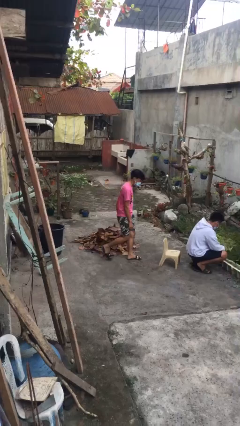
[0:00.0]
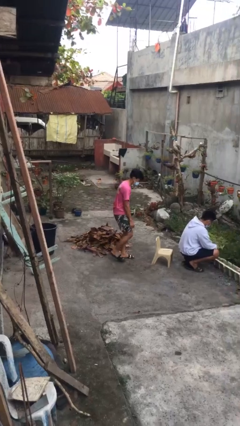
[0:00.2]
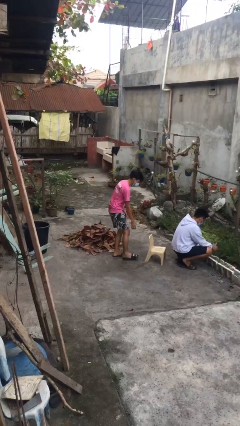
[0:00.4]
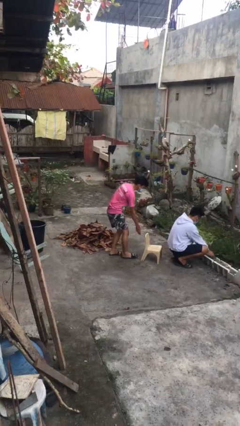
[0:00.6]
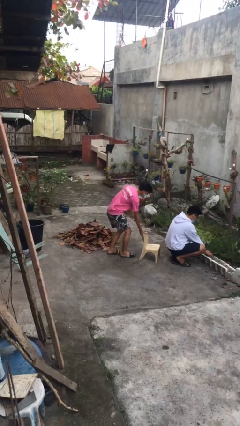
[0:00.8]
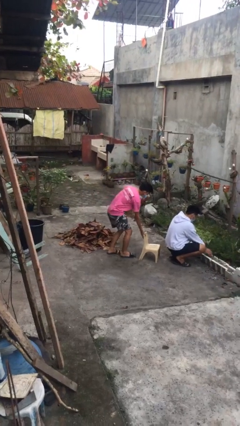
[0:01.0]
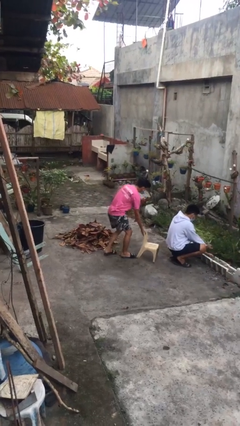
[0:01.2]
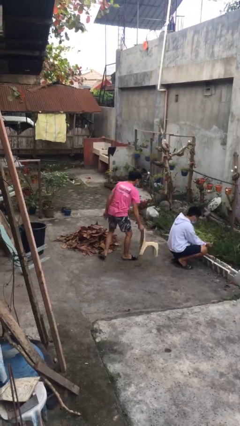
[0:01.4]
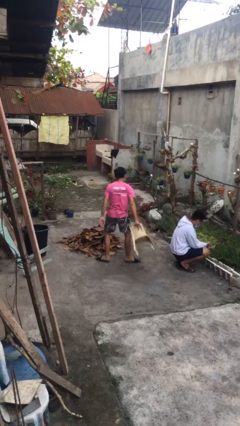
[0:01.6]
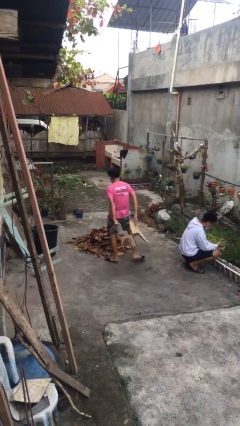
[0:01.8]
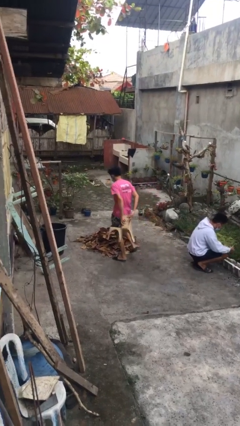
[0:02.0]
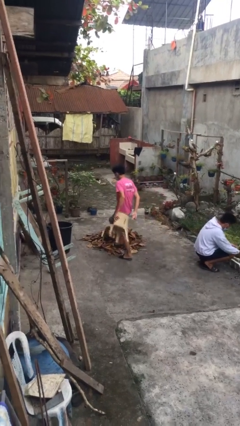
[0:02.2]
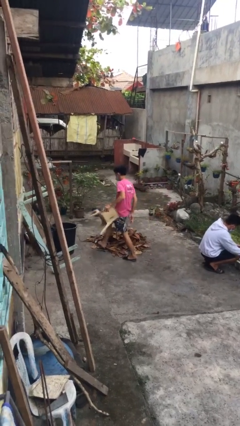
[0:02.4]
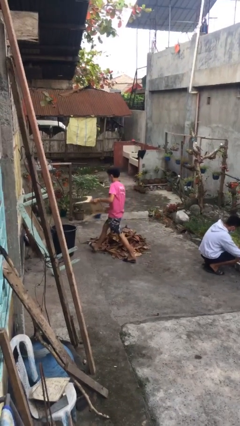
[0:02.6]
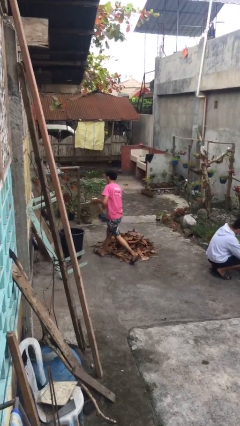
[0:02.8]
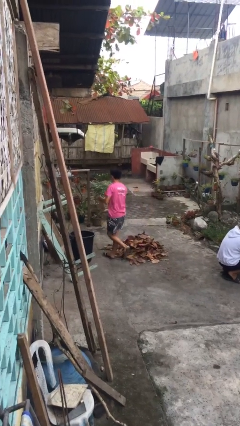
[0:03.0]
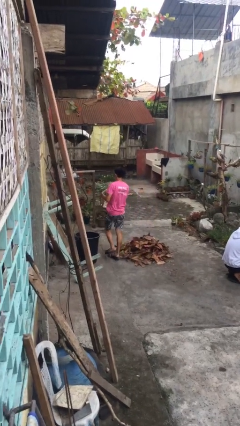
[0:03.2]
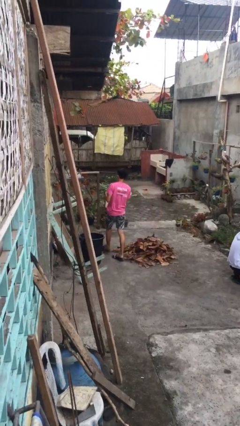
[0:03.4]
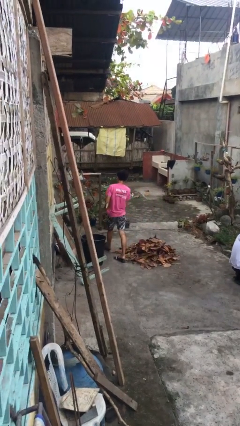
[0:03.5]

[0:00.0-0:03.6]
person steals object from person

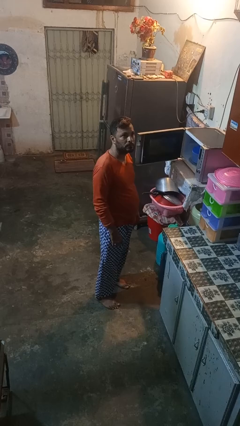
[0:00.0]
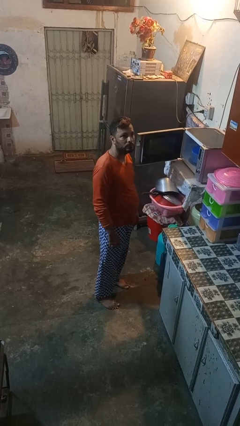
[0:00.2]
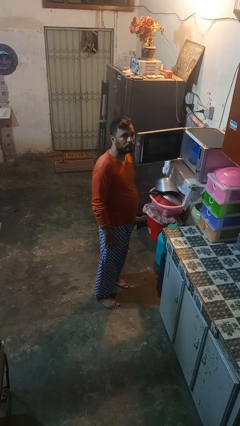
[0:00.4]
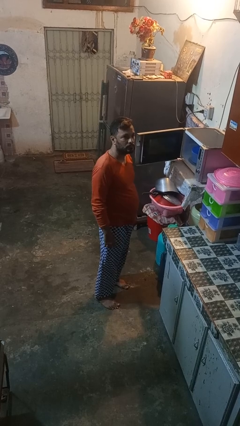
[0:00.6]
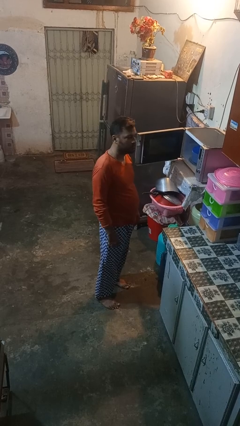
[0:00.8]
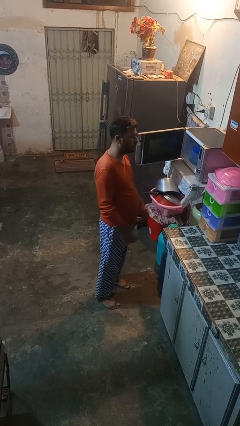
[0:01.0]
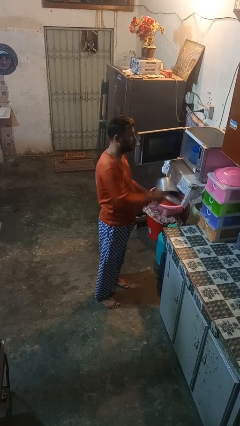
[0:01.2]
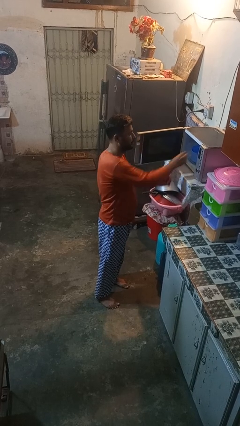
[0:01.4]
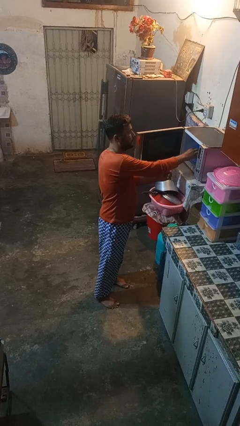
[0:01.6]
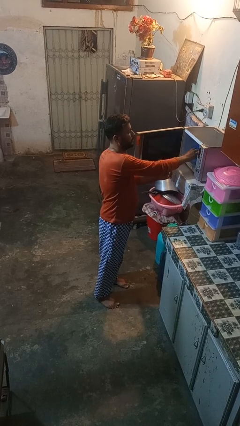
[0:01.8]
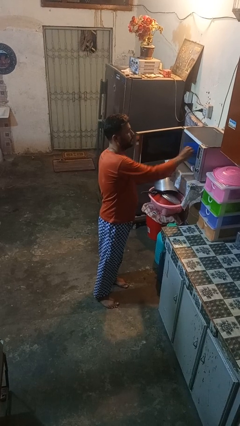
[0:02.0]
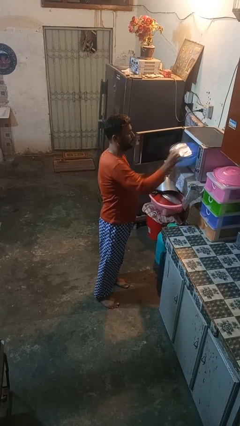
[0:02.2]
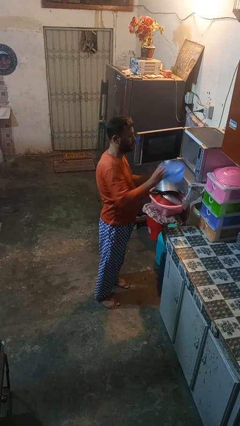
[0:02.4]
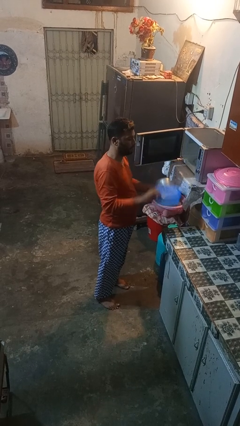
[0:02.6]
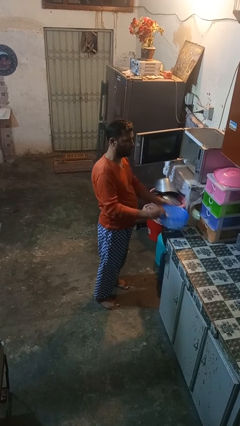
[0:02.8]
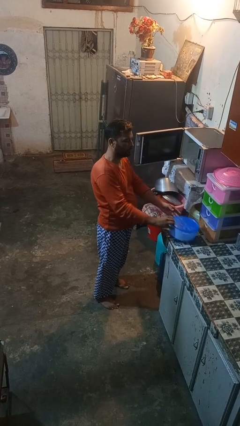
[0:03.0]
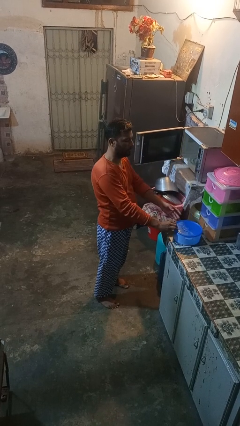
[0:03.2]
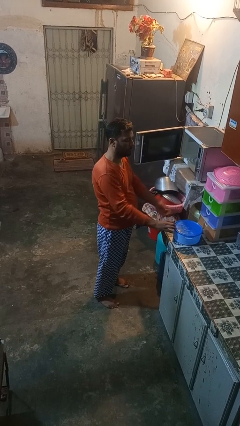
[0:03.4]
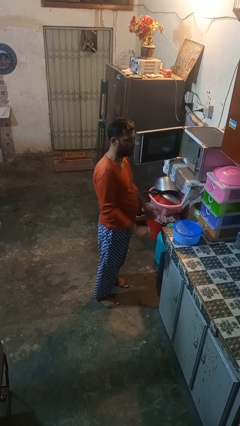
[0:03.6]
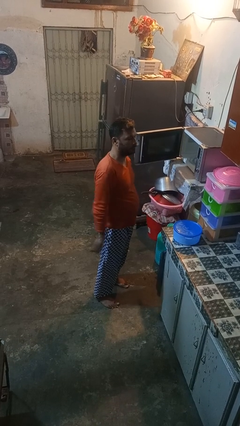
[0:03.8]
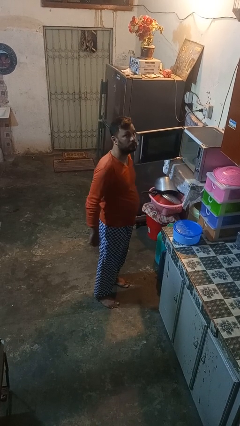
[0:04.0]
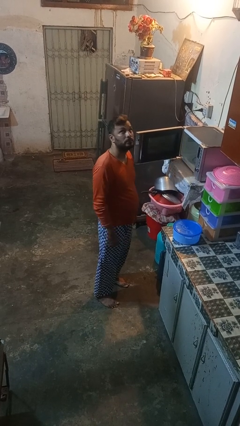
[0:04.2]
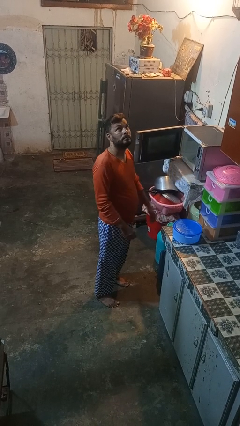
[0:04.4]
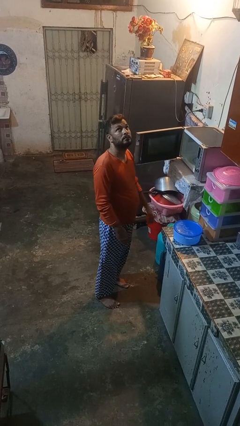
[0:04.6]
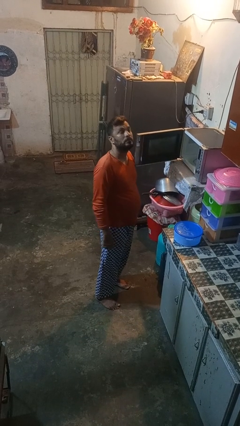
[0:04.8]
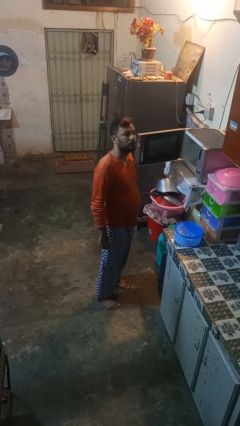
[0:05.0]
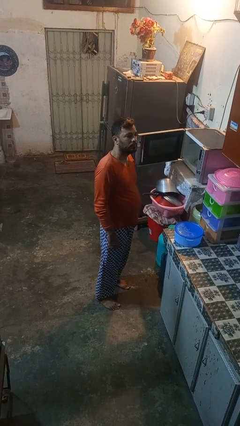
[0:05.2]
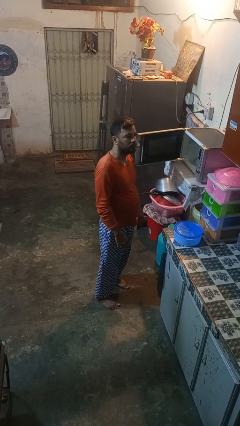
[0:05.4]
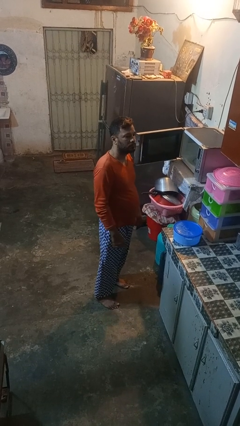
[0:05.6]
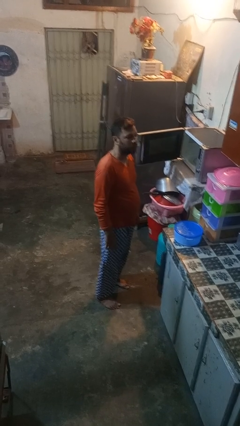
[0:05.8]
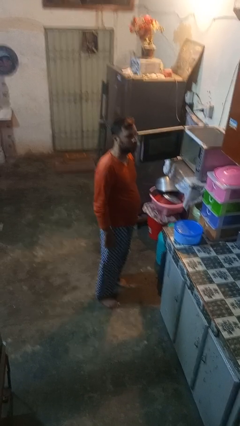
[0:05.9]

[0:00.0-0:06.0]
person takes object from microwave

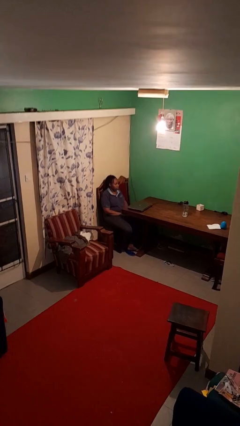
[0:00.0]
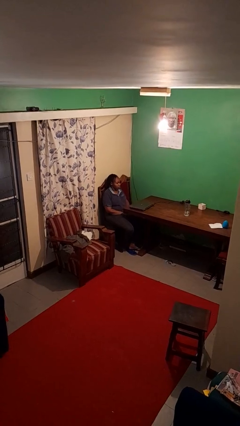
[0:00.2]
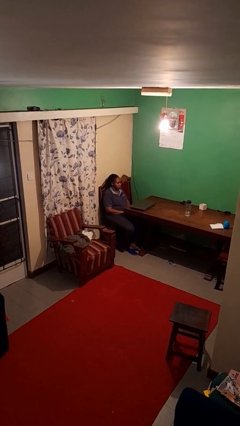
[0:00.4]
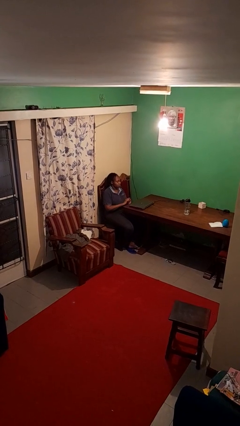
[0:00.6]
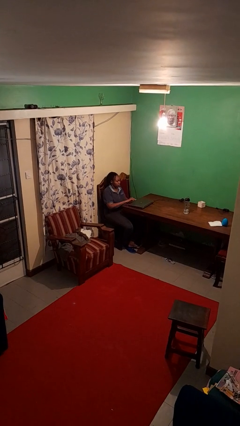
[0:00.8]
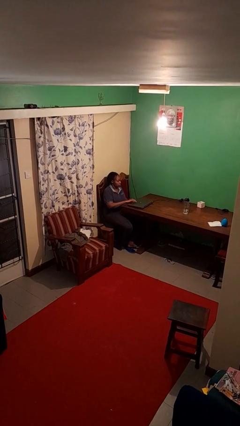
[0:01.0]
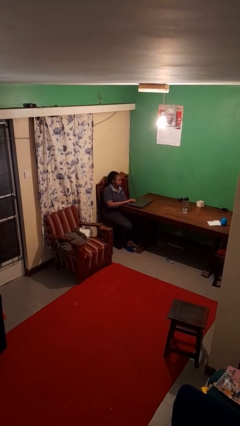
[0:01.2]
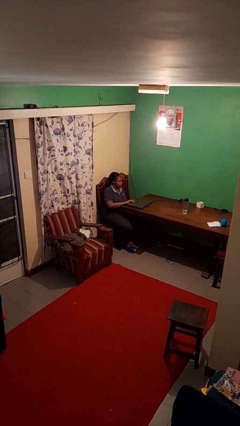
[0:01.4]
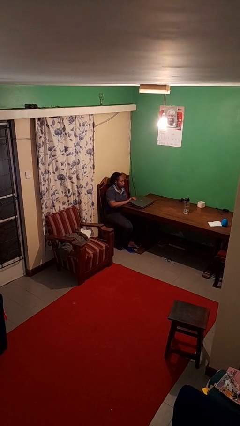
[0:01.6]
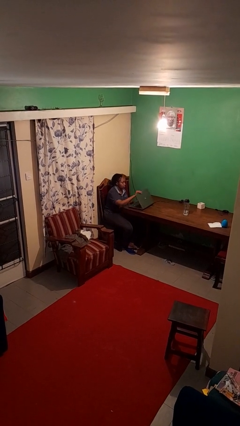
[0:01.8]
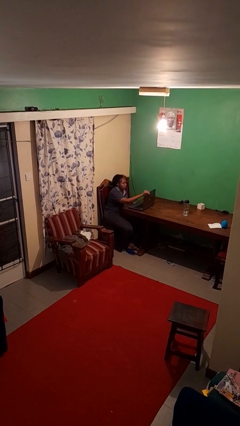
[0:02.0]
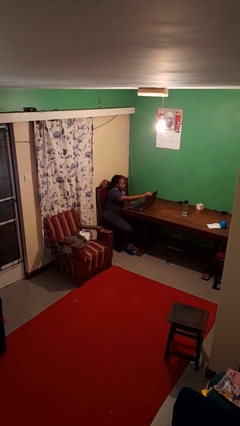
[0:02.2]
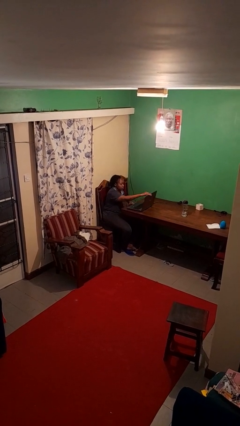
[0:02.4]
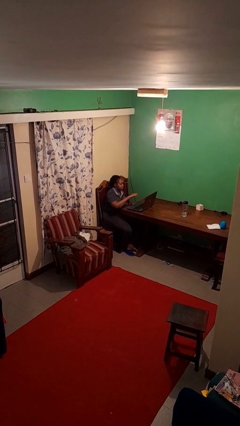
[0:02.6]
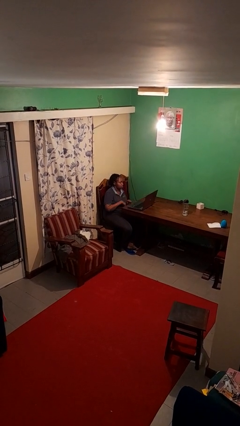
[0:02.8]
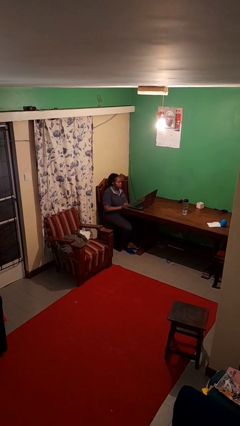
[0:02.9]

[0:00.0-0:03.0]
person opens laptop

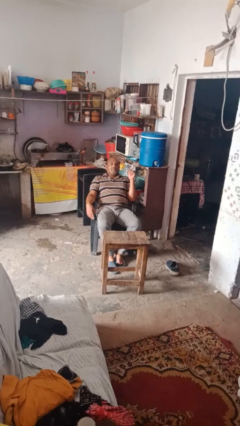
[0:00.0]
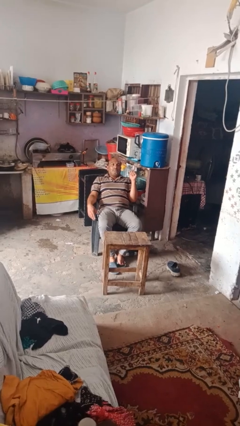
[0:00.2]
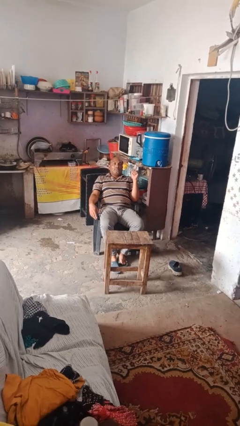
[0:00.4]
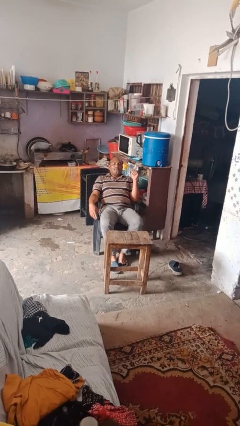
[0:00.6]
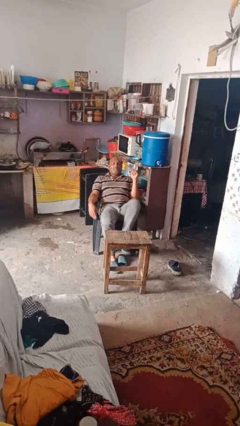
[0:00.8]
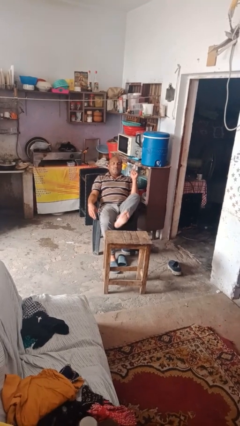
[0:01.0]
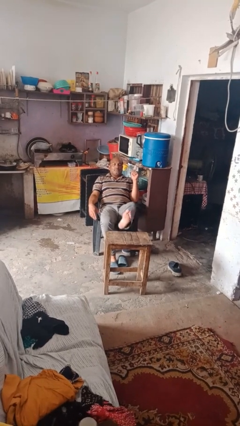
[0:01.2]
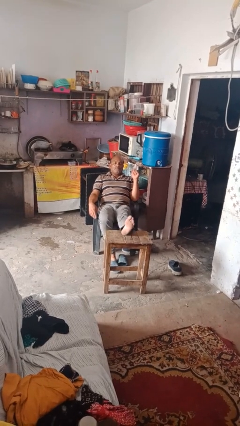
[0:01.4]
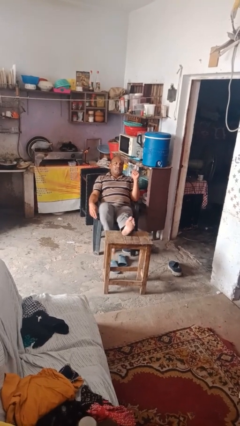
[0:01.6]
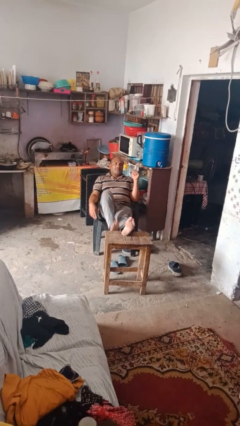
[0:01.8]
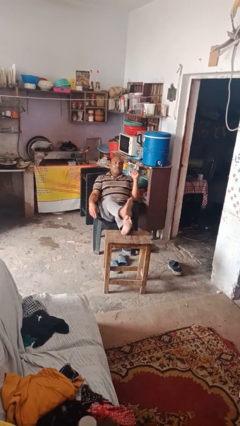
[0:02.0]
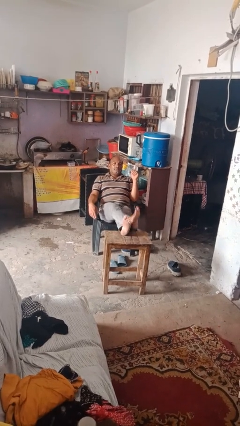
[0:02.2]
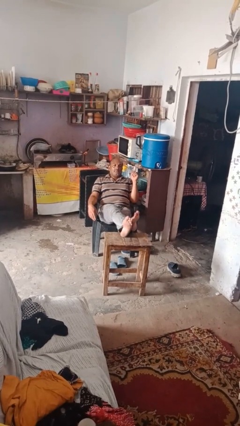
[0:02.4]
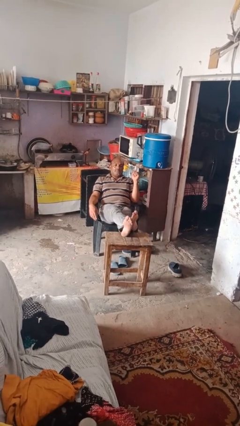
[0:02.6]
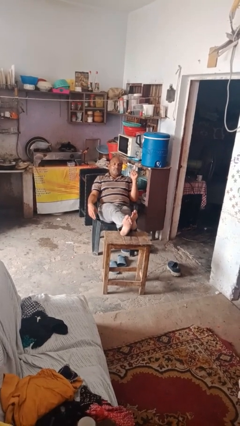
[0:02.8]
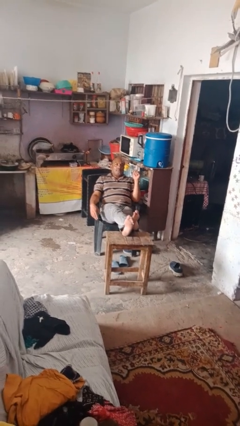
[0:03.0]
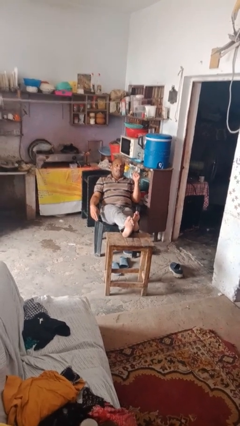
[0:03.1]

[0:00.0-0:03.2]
person puts feet up

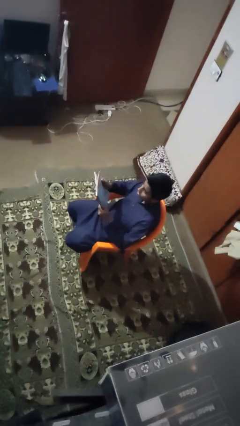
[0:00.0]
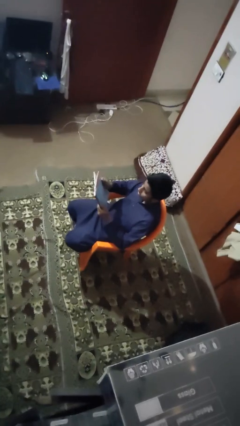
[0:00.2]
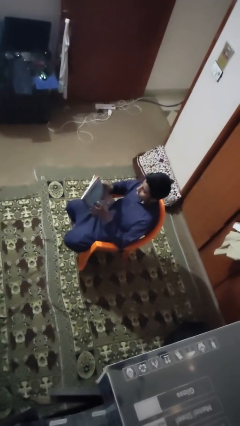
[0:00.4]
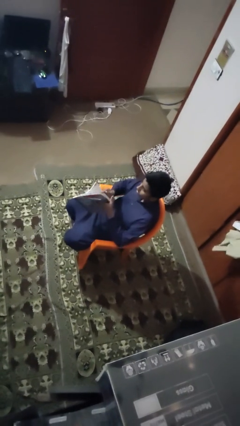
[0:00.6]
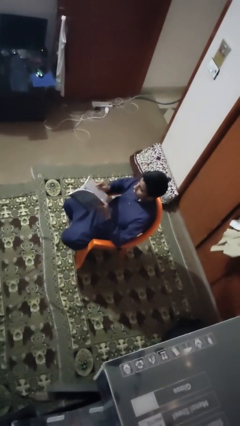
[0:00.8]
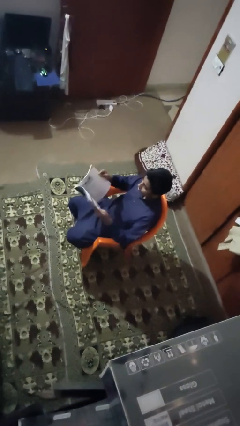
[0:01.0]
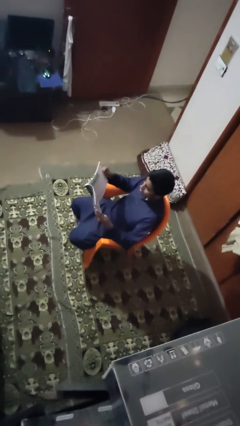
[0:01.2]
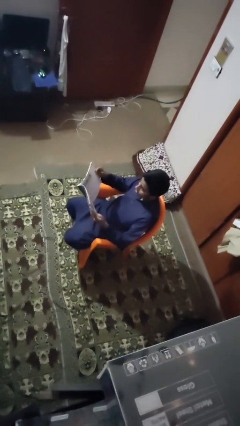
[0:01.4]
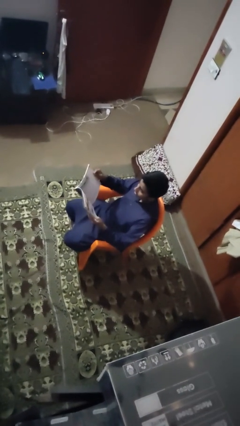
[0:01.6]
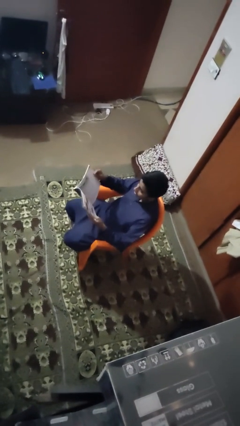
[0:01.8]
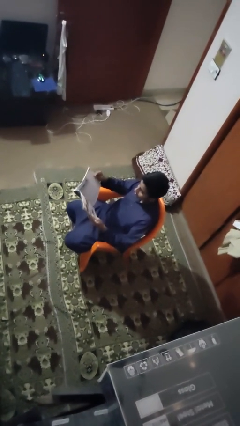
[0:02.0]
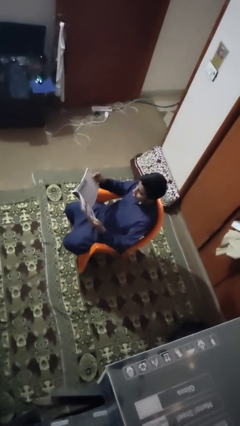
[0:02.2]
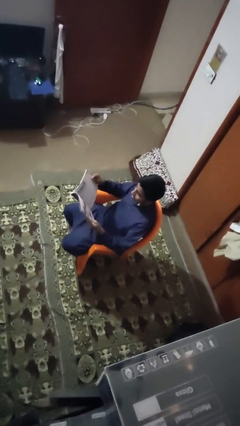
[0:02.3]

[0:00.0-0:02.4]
person reads book
